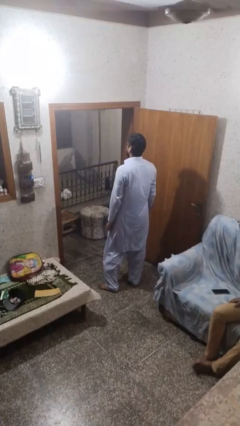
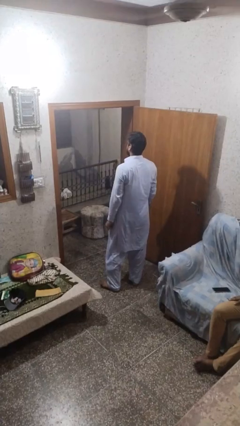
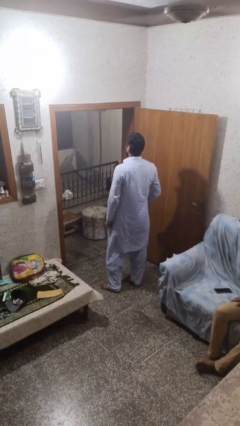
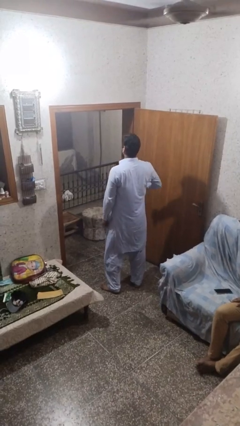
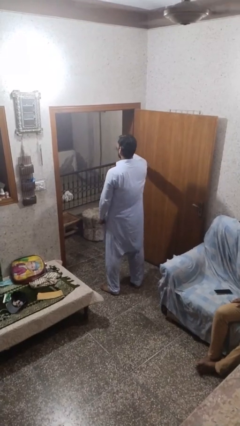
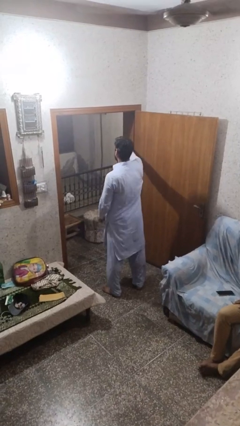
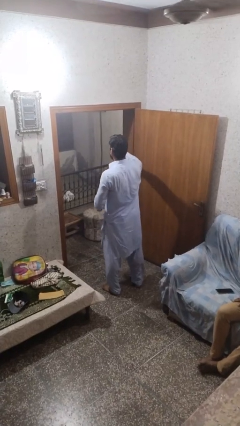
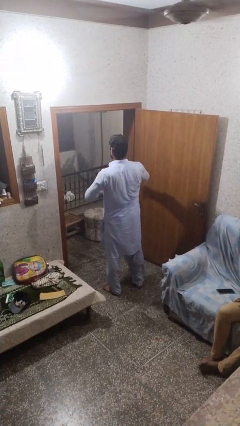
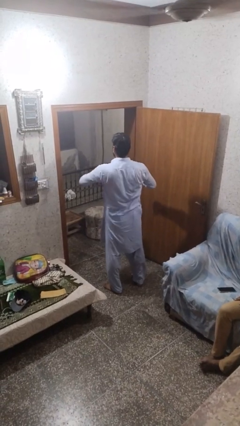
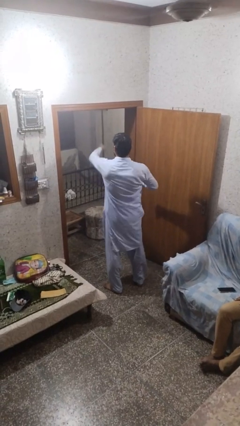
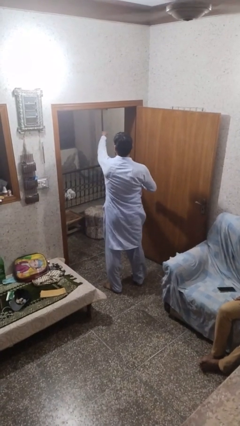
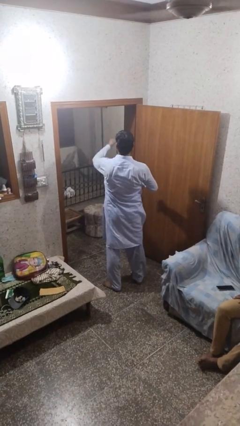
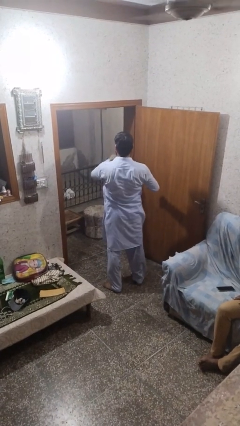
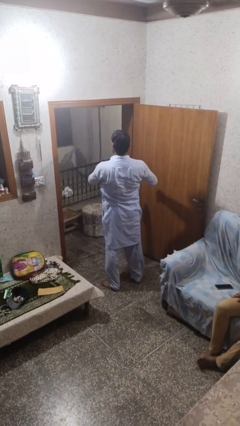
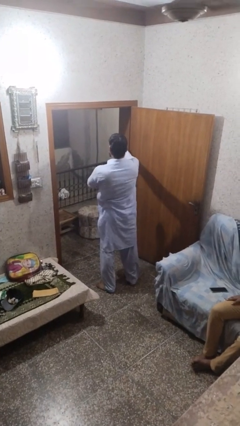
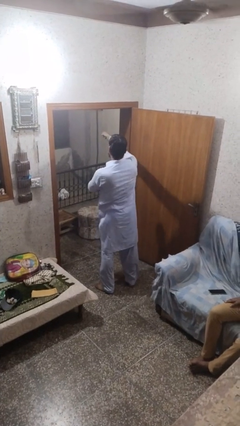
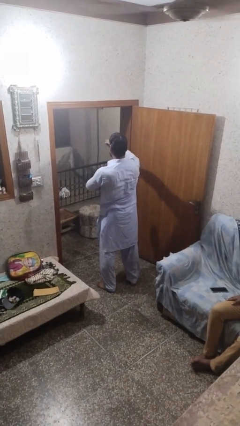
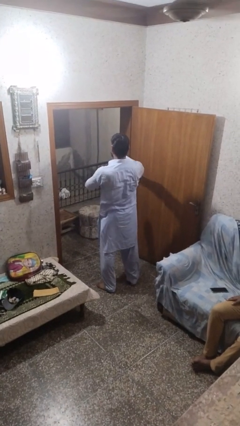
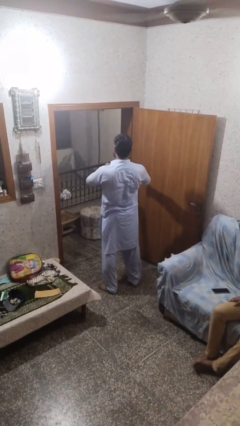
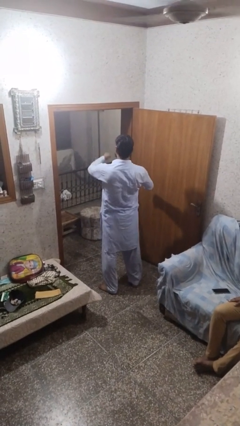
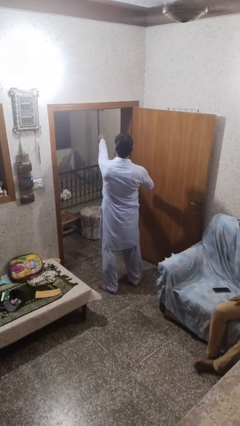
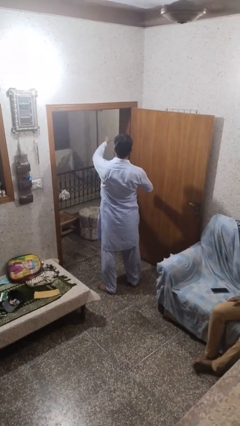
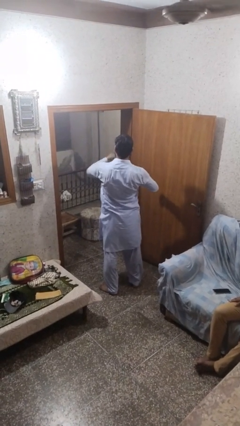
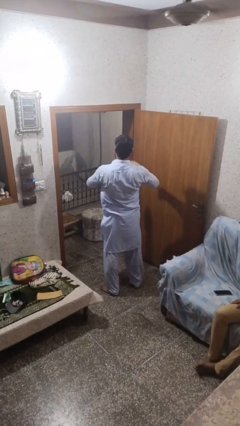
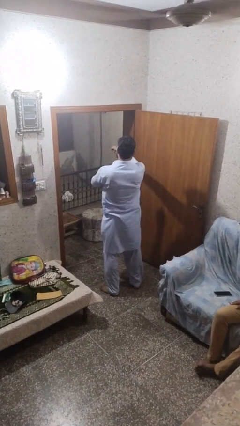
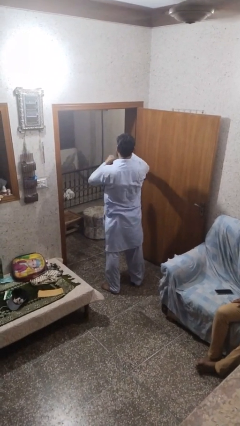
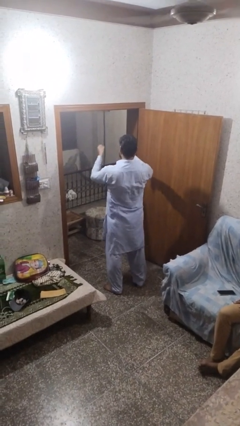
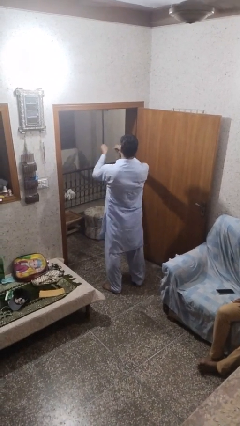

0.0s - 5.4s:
person punches

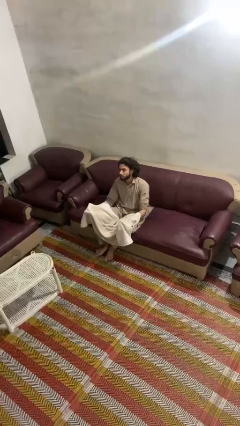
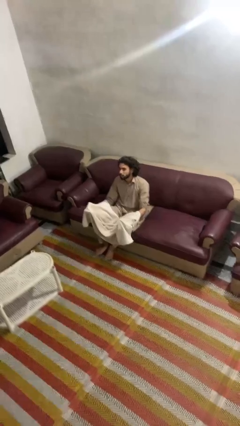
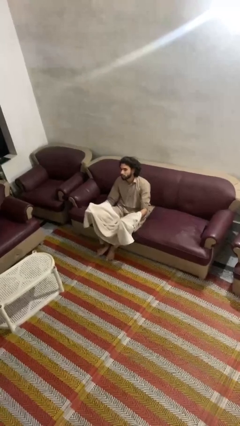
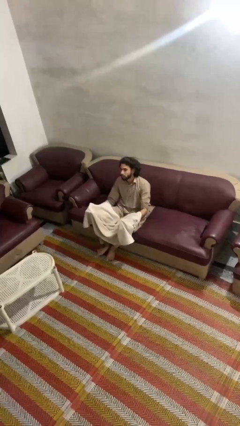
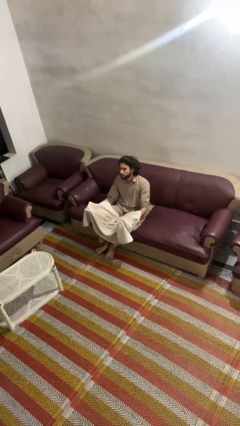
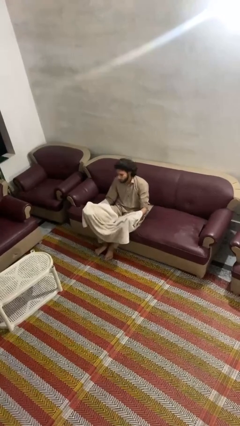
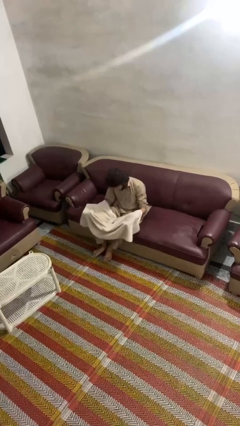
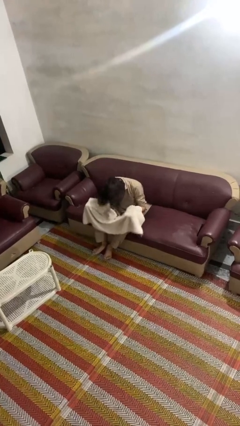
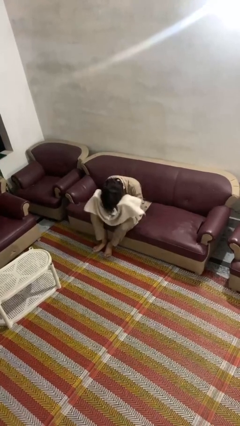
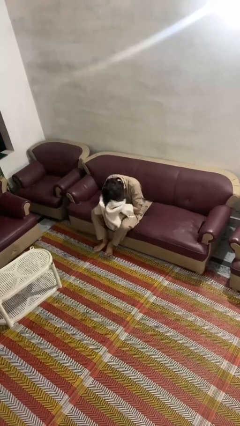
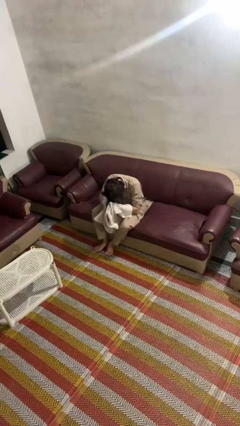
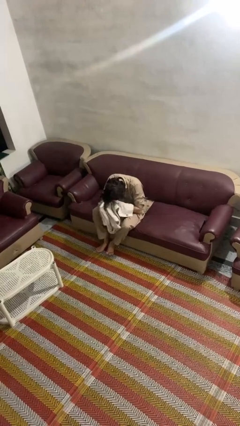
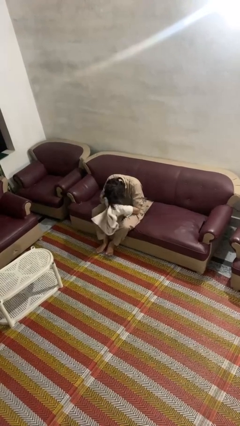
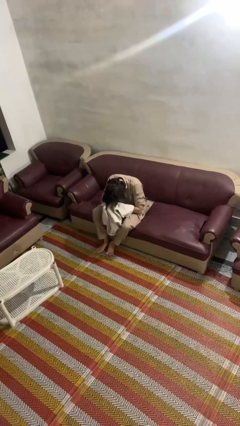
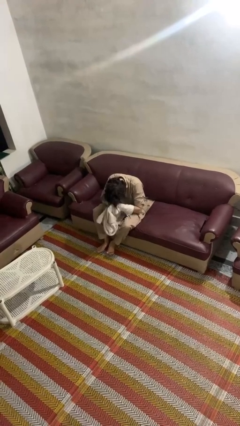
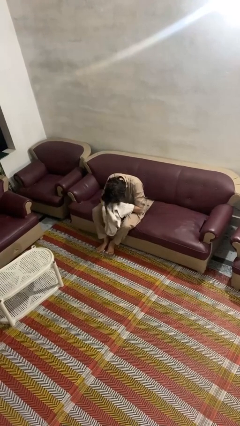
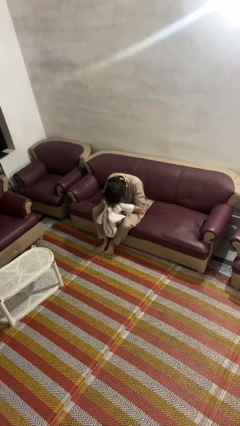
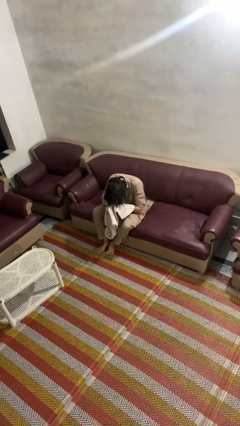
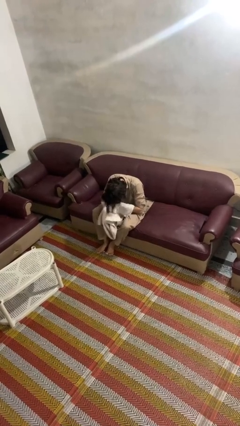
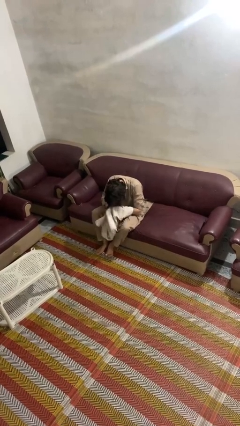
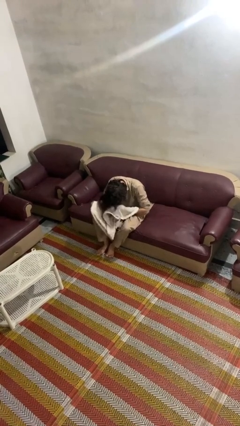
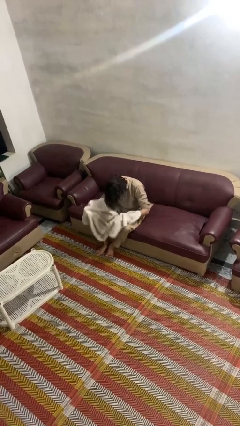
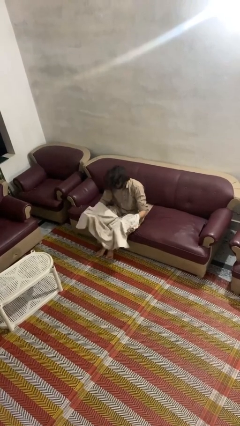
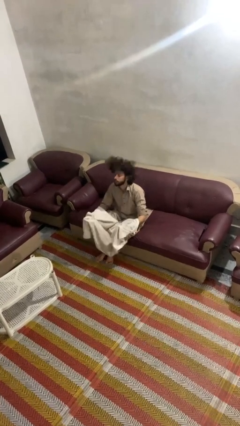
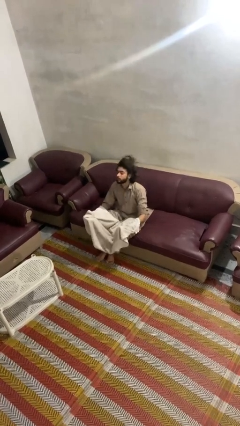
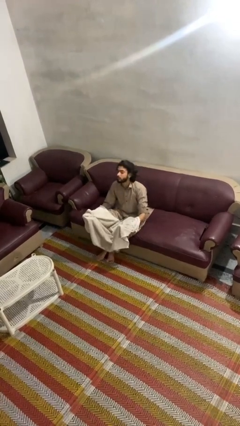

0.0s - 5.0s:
person dries hair with towel

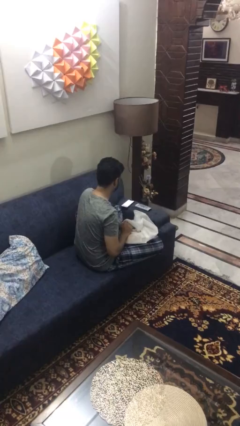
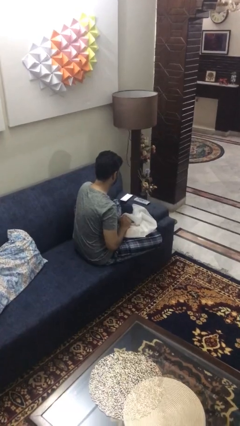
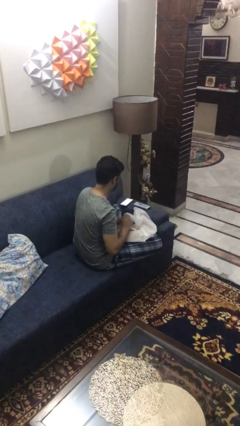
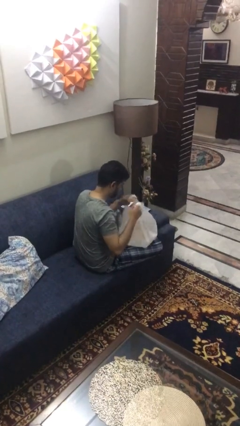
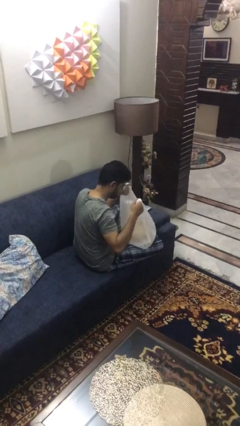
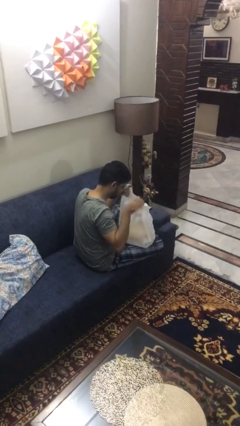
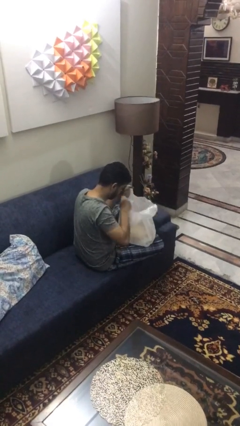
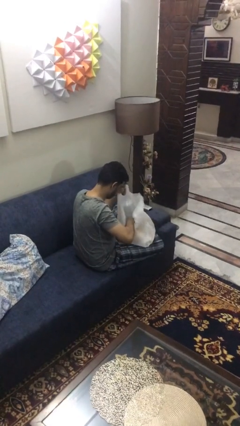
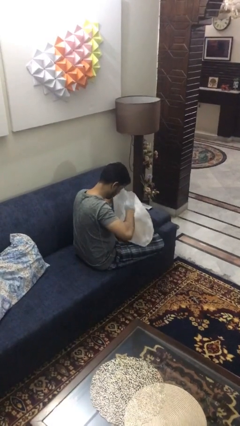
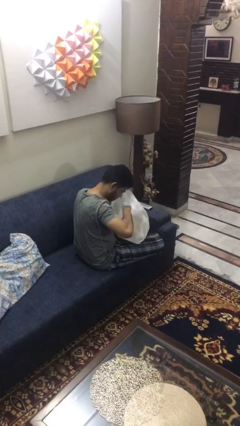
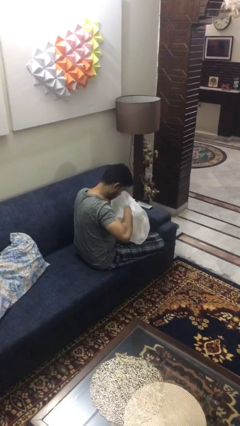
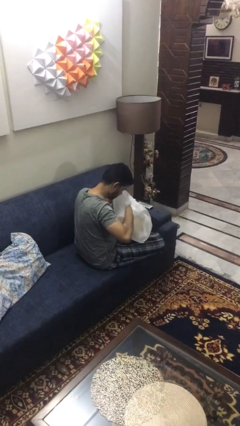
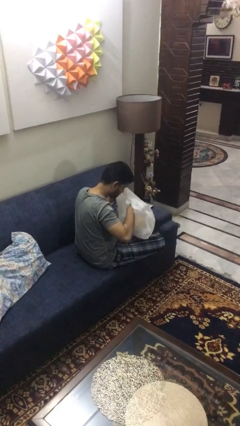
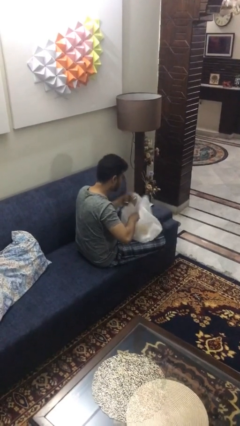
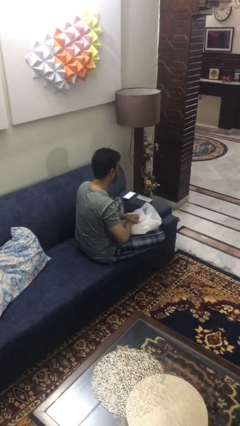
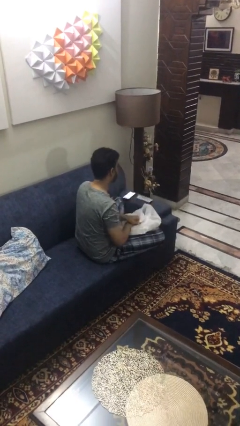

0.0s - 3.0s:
person searches in bag

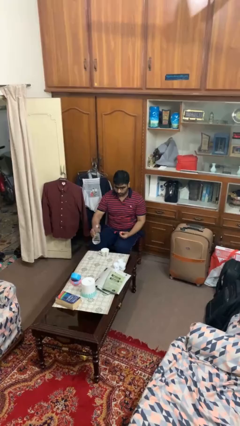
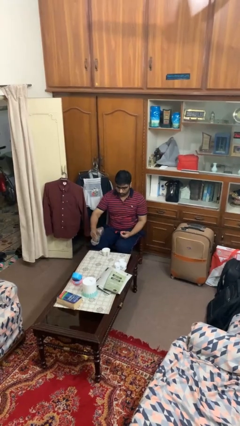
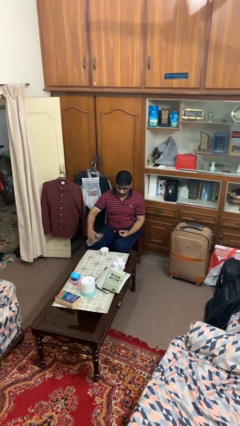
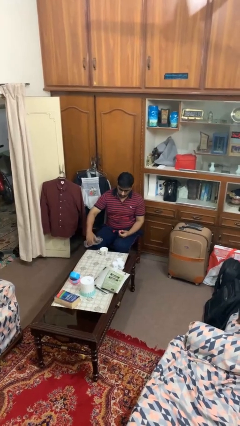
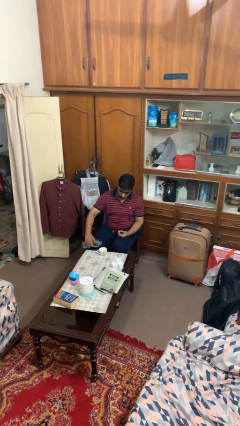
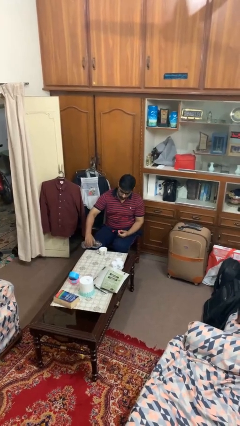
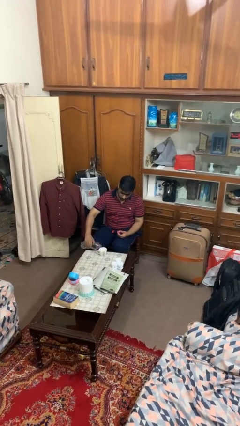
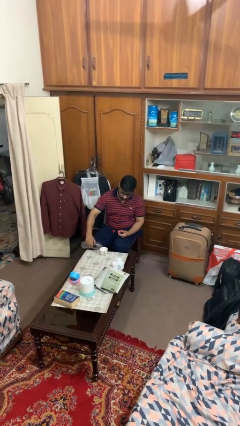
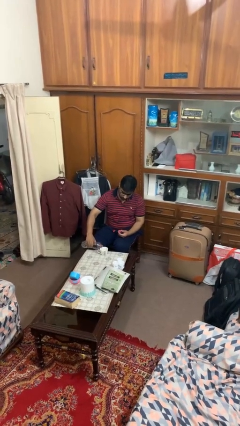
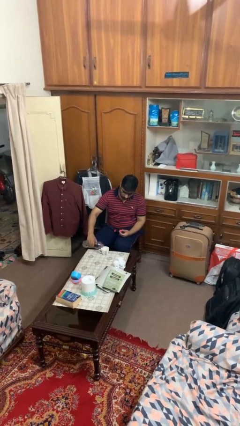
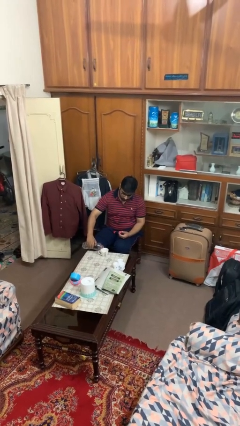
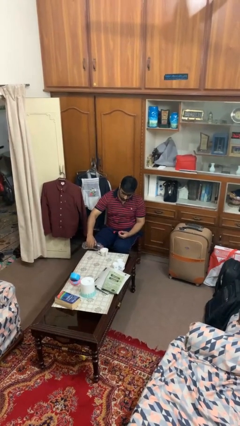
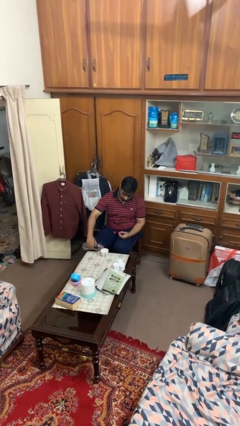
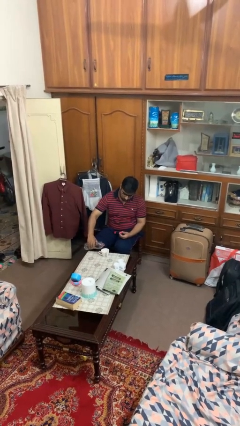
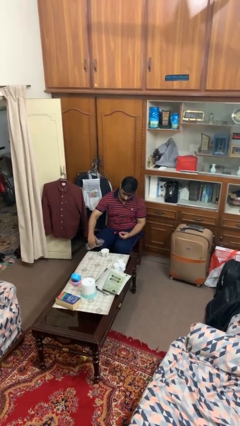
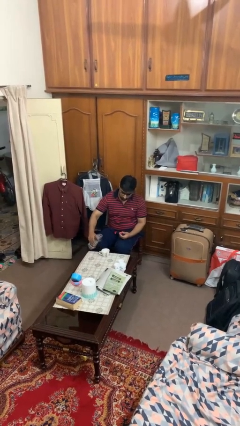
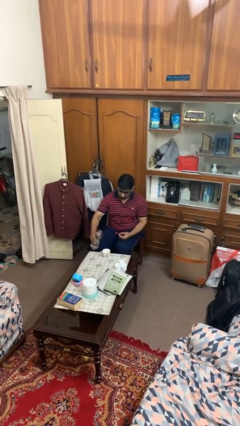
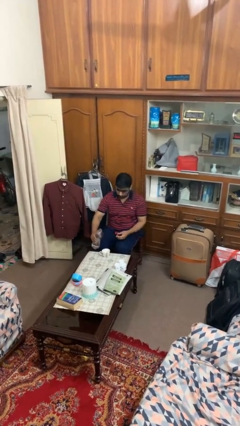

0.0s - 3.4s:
person pours liquid into cup

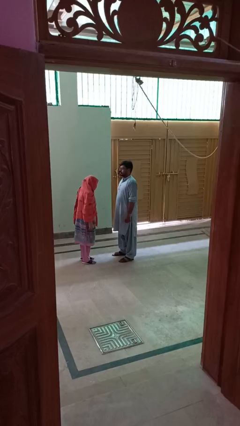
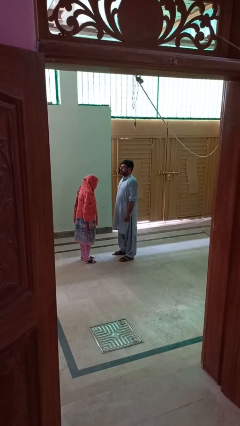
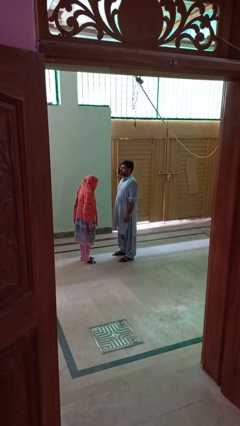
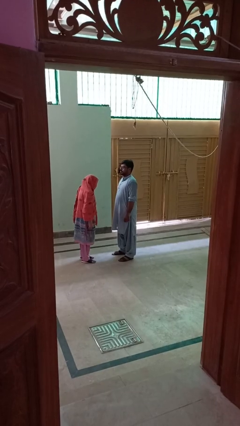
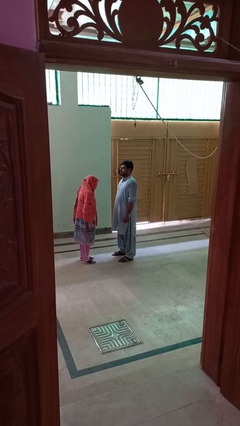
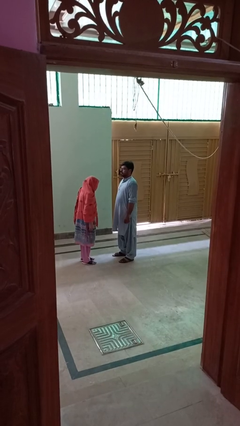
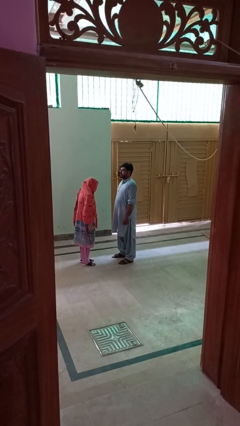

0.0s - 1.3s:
person pounds shoulders of person
